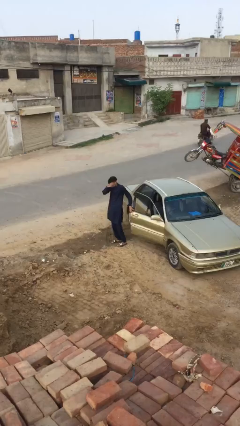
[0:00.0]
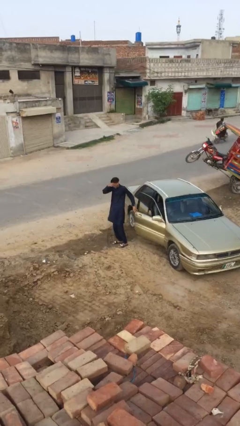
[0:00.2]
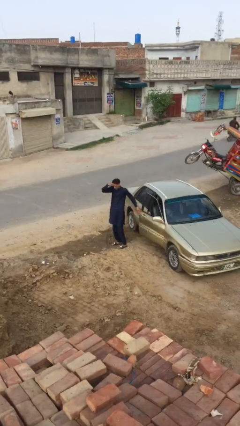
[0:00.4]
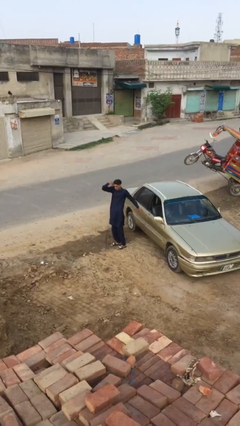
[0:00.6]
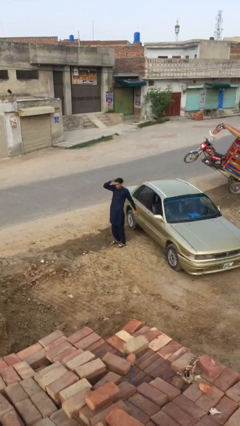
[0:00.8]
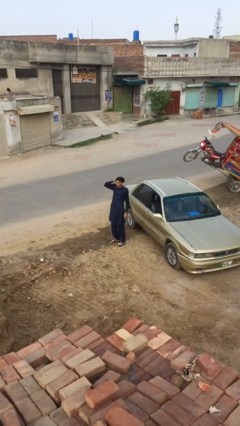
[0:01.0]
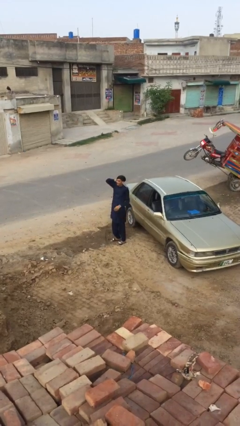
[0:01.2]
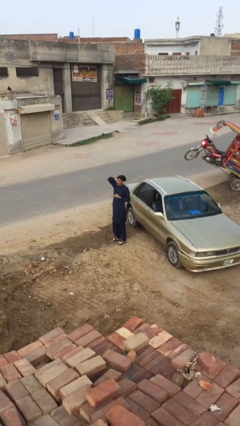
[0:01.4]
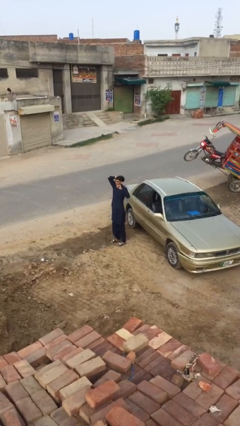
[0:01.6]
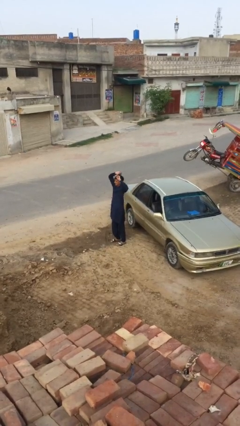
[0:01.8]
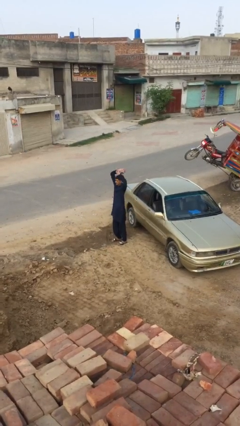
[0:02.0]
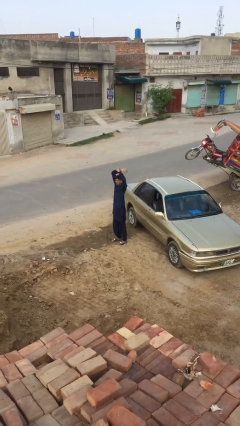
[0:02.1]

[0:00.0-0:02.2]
person closes car door

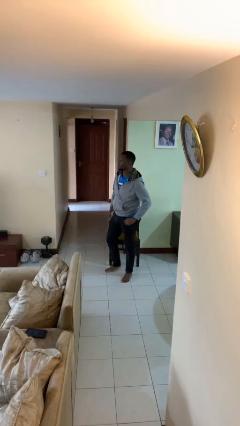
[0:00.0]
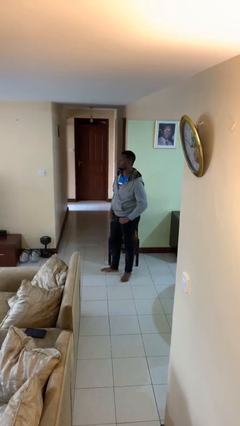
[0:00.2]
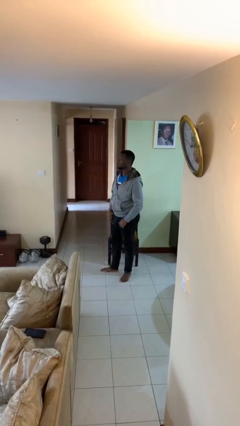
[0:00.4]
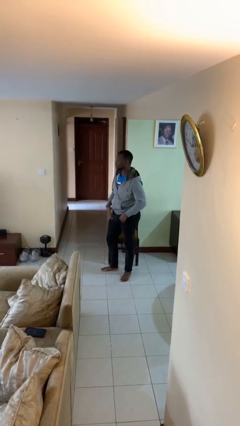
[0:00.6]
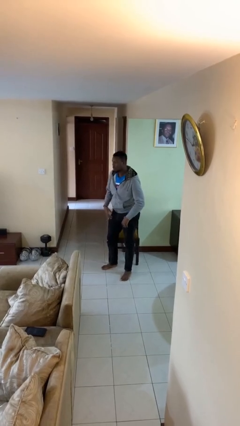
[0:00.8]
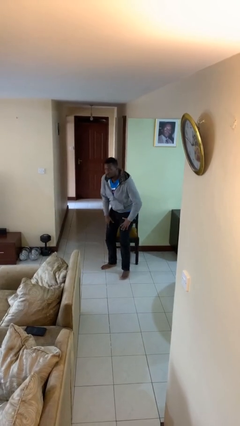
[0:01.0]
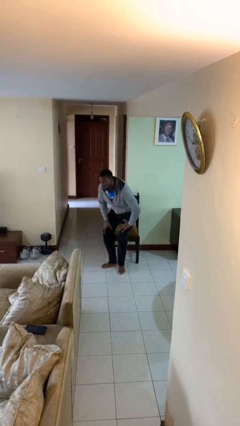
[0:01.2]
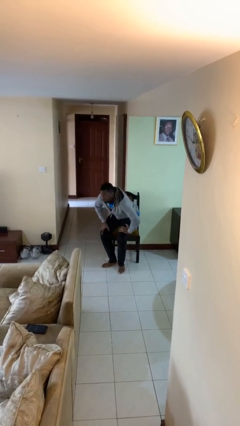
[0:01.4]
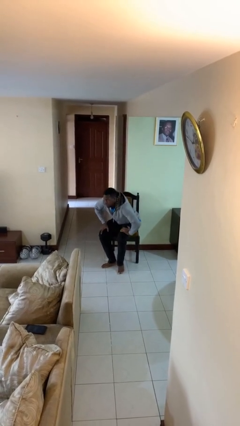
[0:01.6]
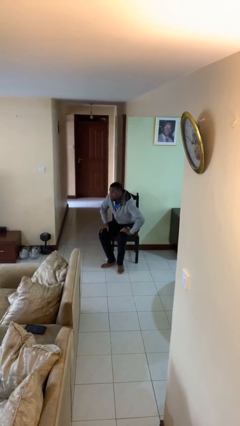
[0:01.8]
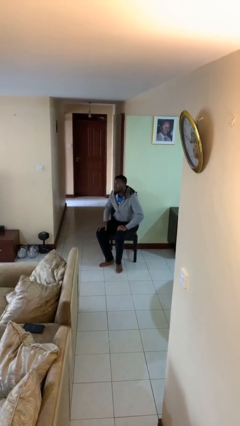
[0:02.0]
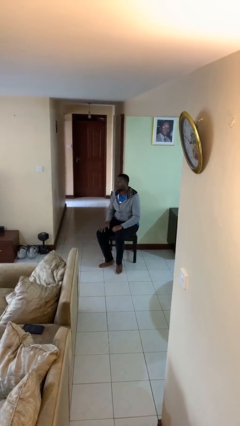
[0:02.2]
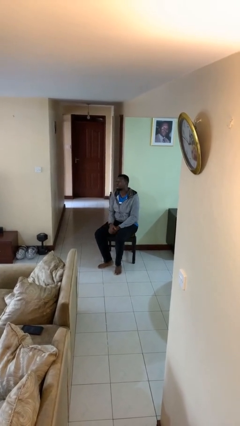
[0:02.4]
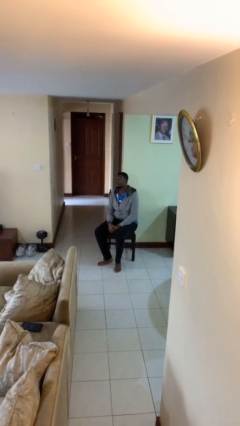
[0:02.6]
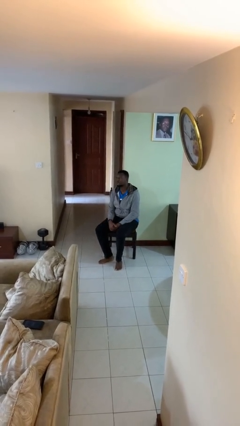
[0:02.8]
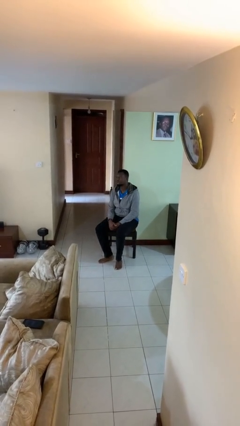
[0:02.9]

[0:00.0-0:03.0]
person sits down

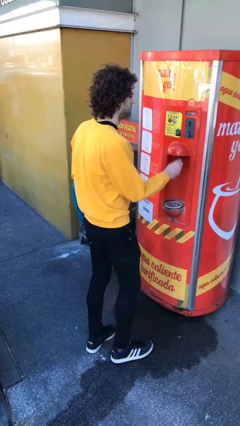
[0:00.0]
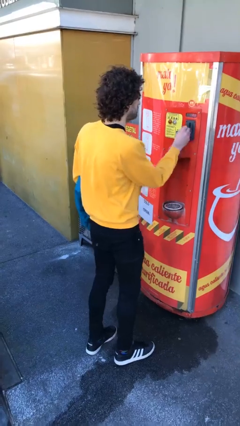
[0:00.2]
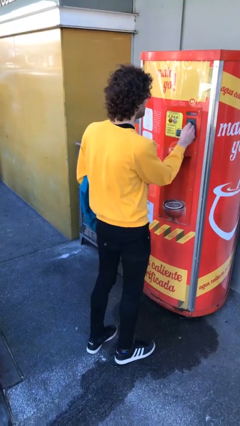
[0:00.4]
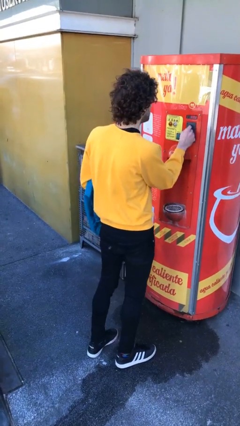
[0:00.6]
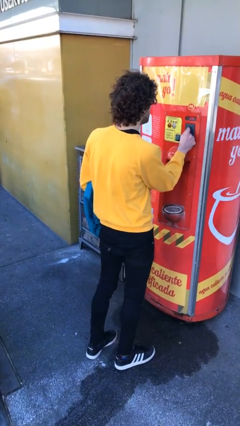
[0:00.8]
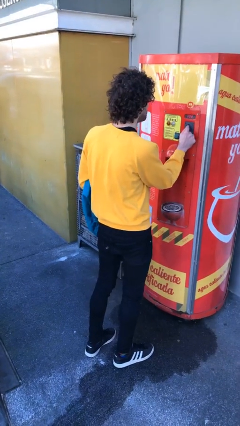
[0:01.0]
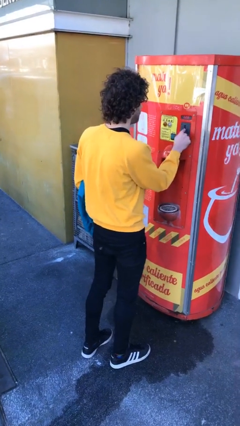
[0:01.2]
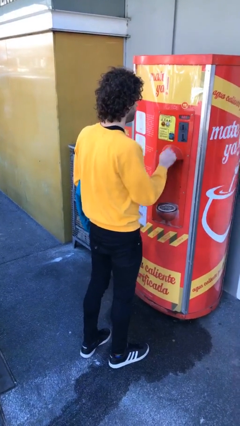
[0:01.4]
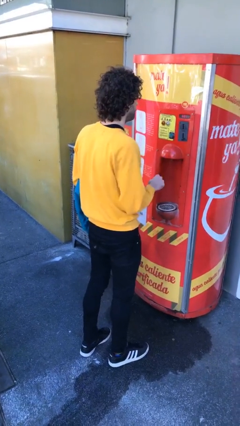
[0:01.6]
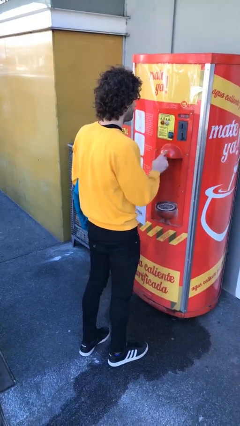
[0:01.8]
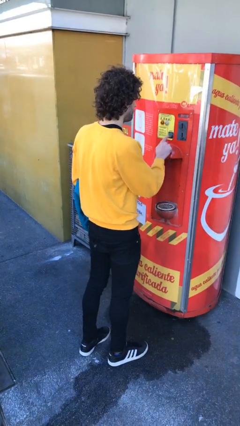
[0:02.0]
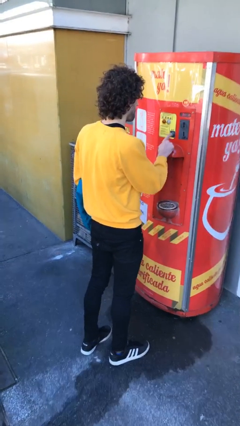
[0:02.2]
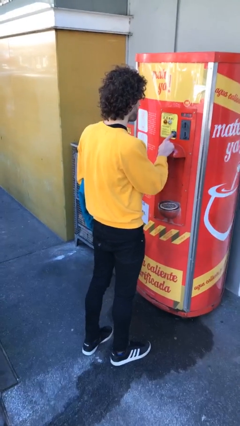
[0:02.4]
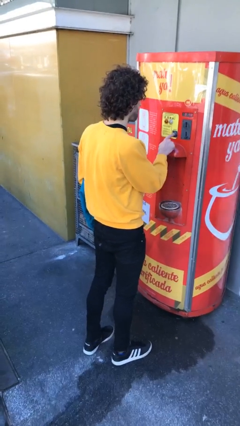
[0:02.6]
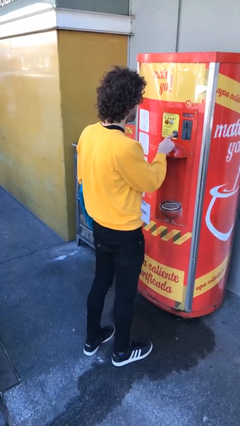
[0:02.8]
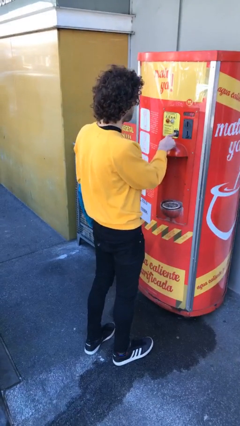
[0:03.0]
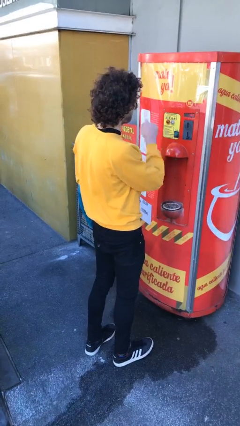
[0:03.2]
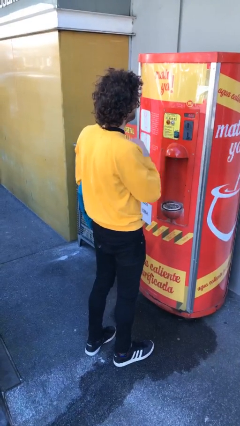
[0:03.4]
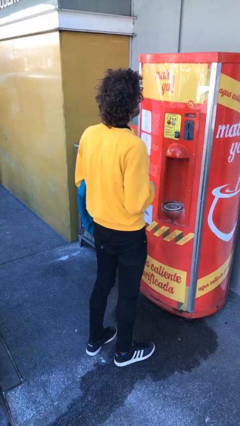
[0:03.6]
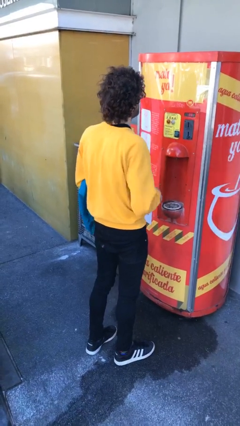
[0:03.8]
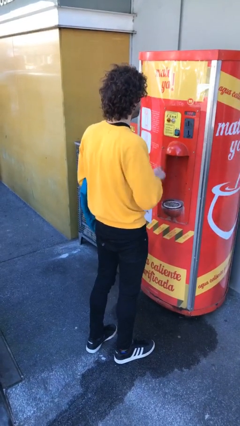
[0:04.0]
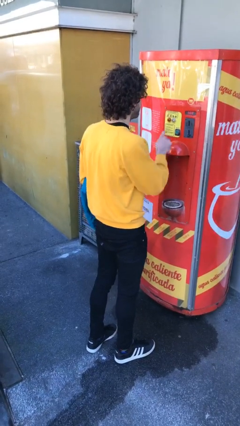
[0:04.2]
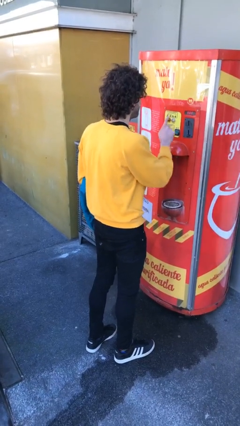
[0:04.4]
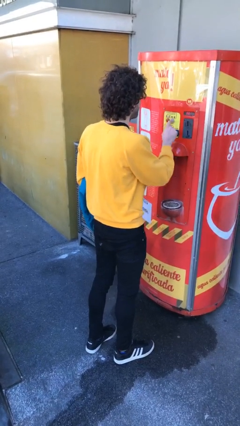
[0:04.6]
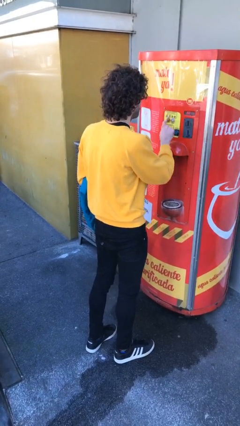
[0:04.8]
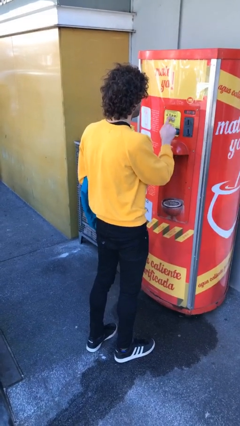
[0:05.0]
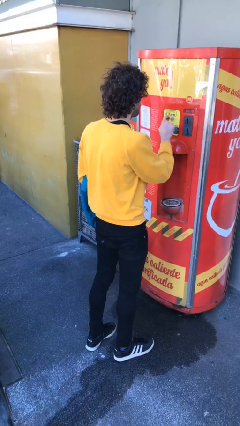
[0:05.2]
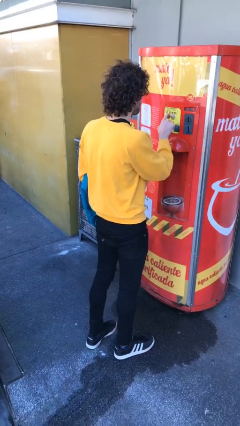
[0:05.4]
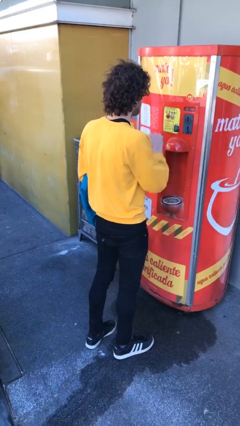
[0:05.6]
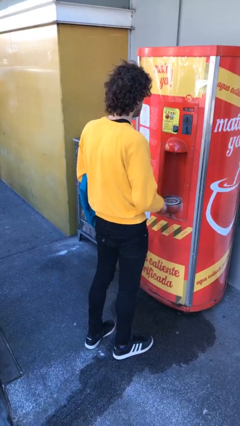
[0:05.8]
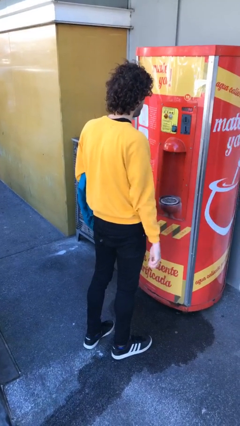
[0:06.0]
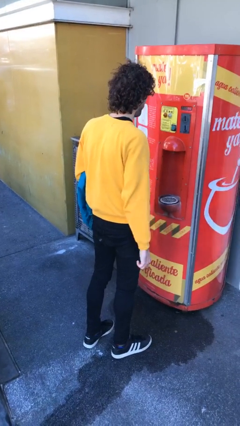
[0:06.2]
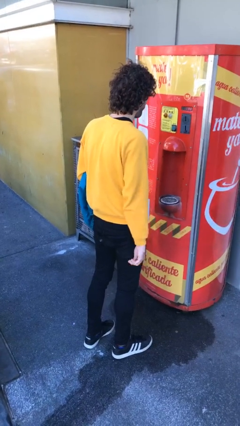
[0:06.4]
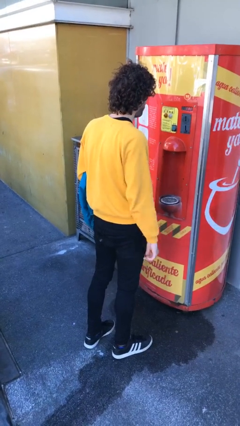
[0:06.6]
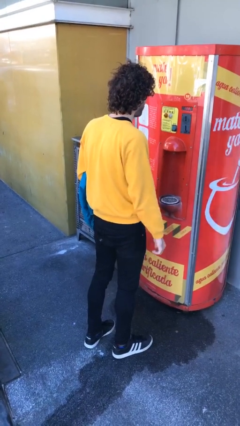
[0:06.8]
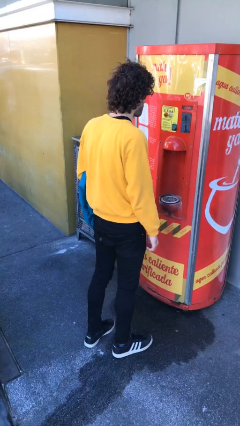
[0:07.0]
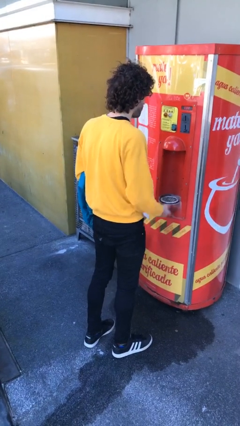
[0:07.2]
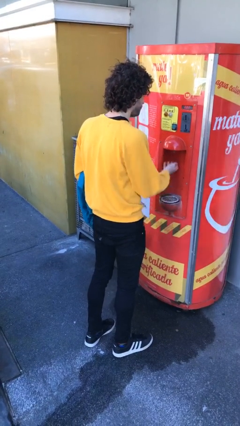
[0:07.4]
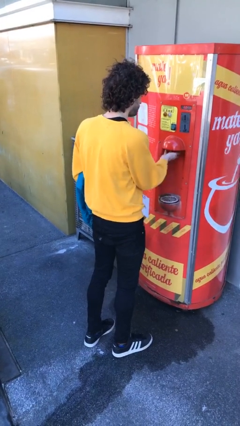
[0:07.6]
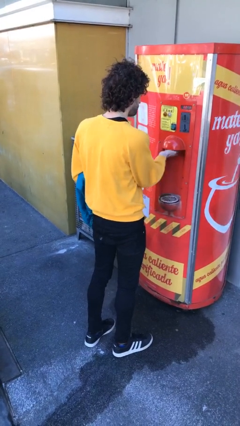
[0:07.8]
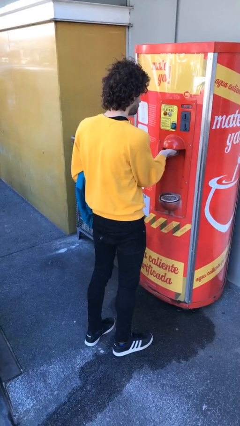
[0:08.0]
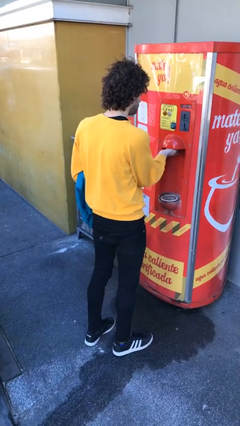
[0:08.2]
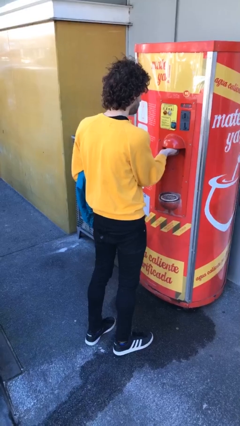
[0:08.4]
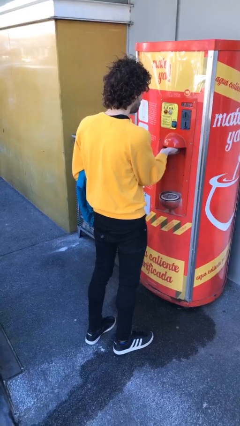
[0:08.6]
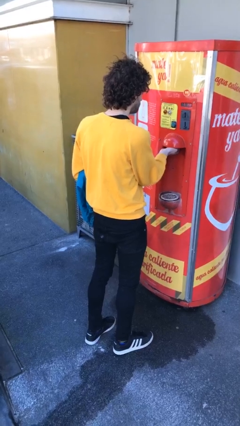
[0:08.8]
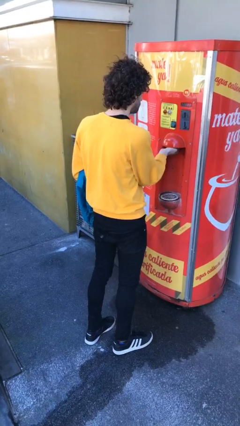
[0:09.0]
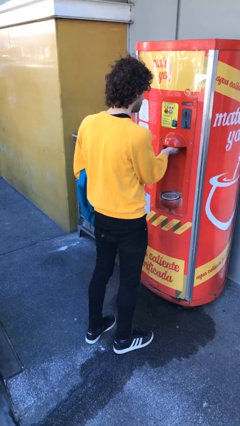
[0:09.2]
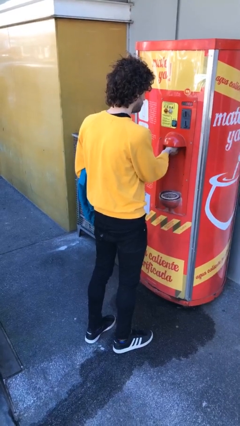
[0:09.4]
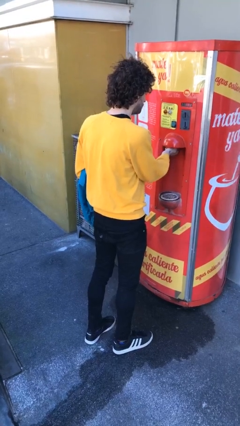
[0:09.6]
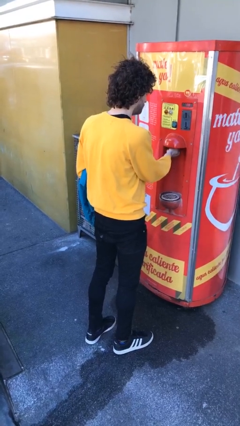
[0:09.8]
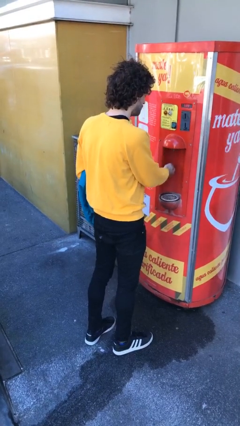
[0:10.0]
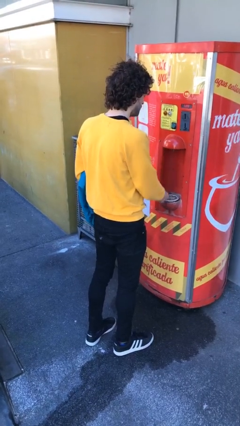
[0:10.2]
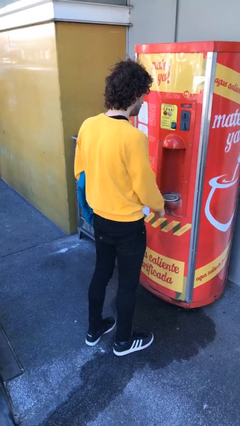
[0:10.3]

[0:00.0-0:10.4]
person purchases from machine

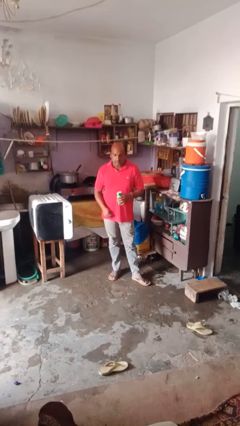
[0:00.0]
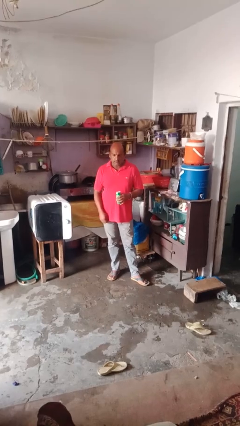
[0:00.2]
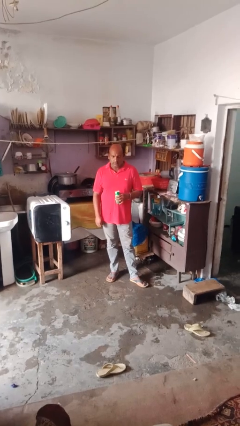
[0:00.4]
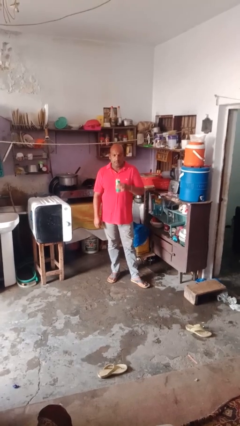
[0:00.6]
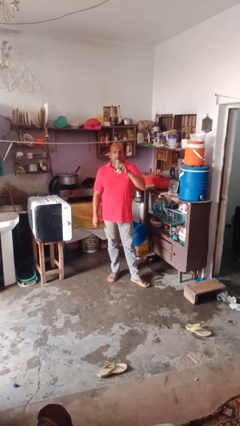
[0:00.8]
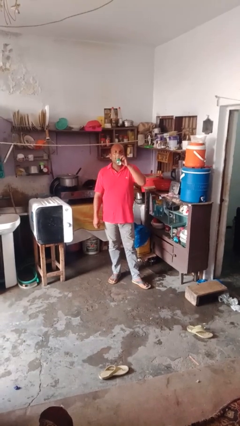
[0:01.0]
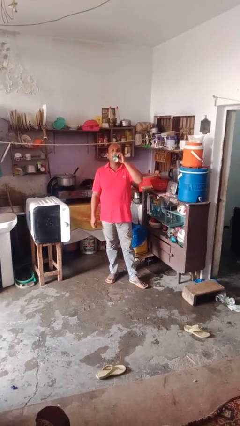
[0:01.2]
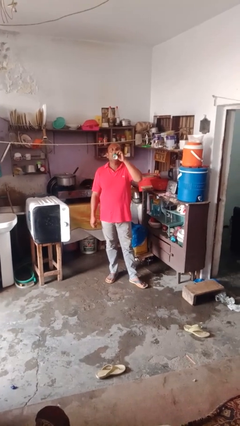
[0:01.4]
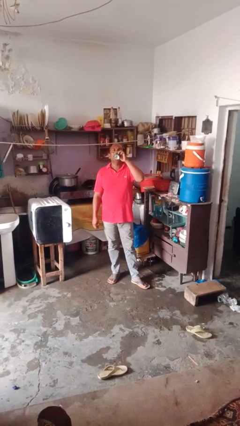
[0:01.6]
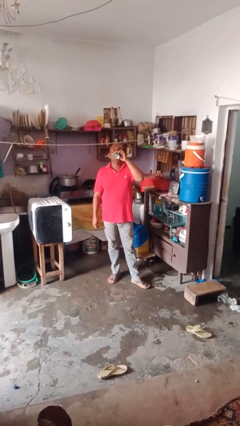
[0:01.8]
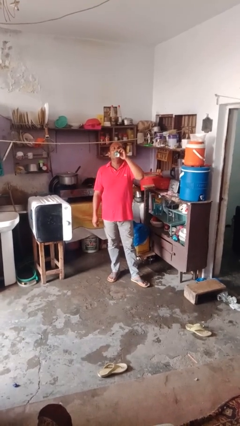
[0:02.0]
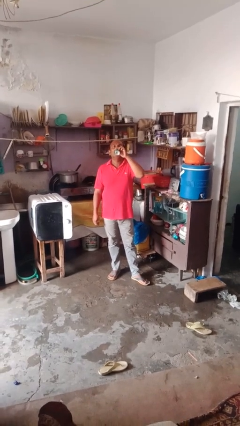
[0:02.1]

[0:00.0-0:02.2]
person drinks from beverage can

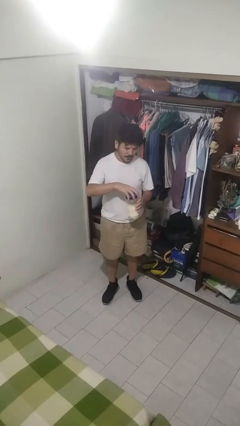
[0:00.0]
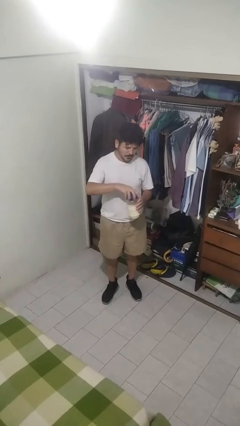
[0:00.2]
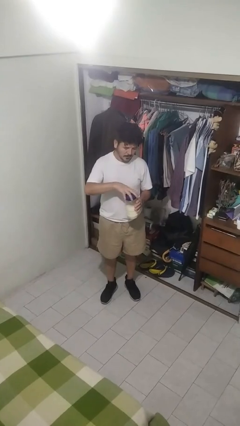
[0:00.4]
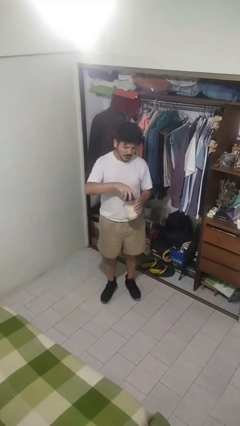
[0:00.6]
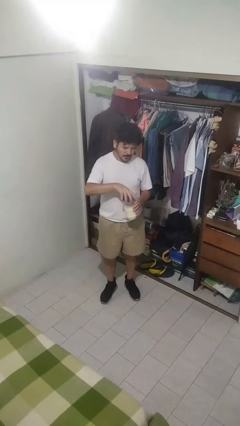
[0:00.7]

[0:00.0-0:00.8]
person closes jar
